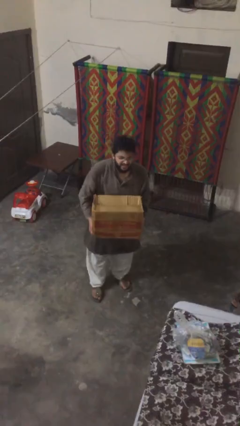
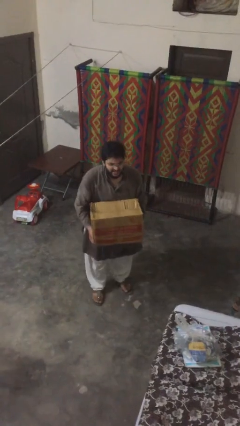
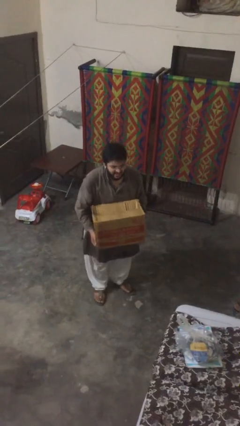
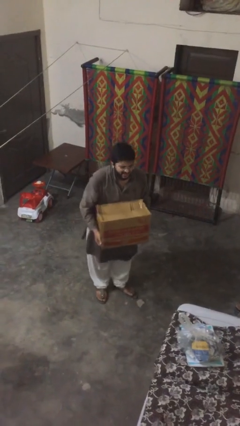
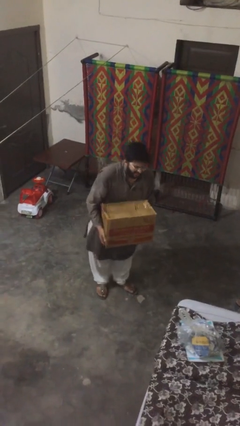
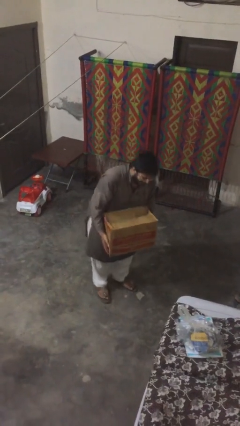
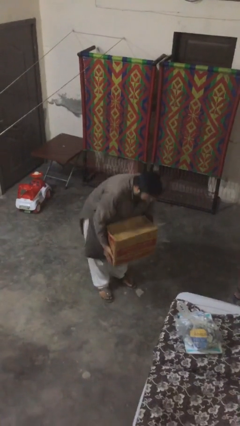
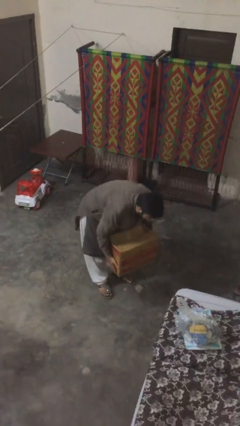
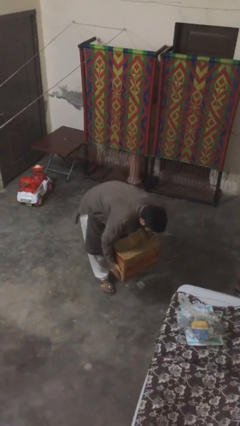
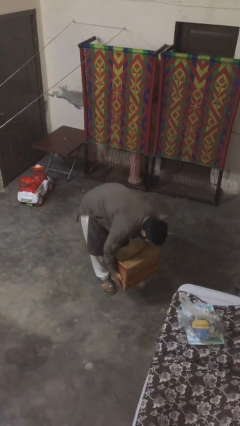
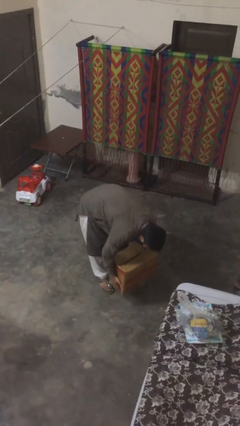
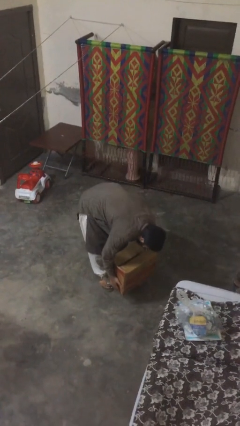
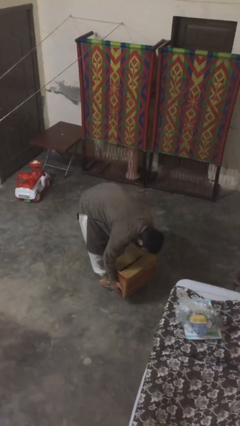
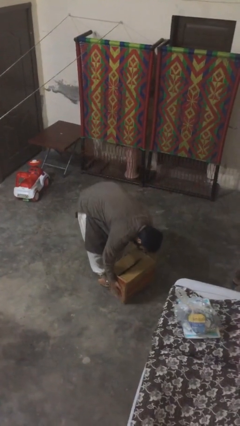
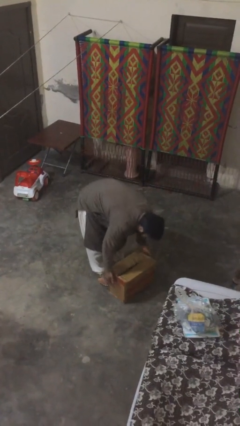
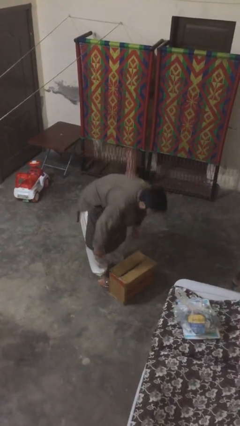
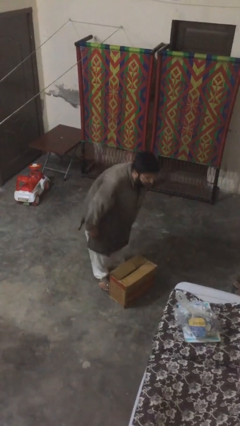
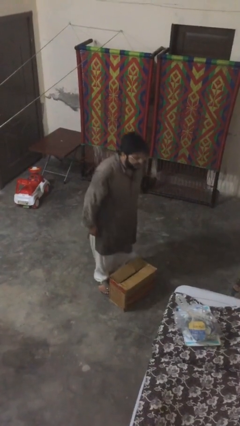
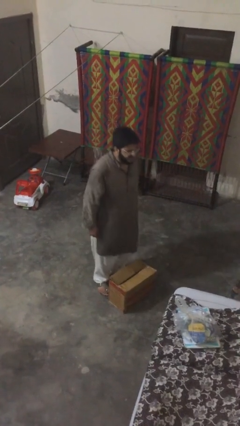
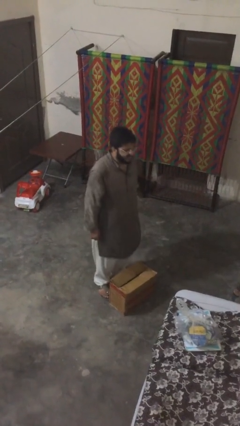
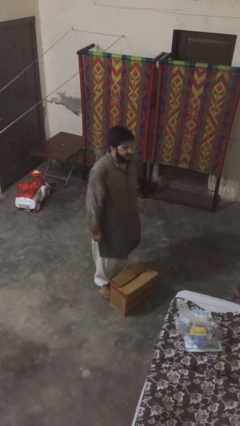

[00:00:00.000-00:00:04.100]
person puts down object on floor

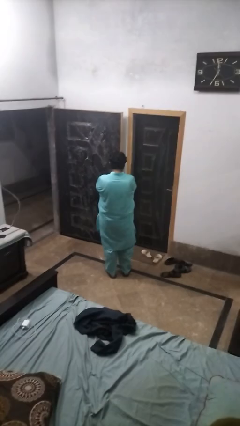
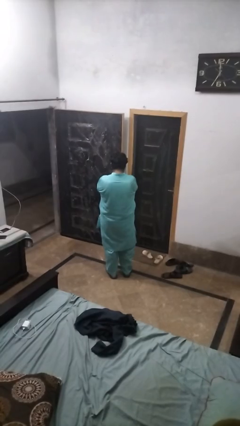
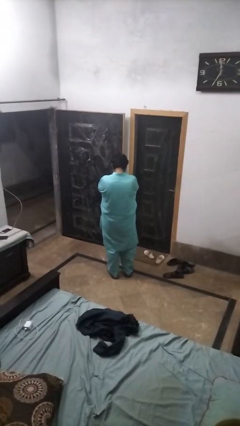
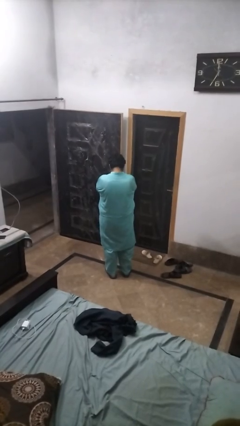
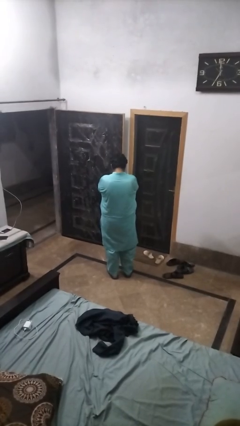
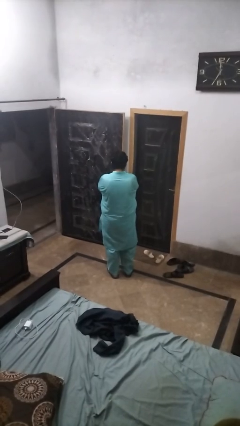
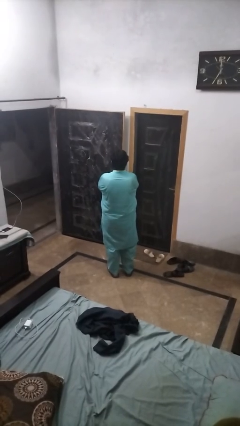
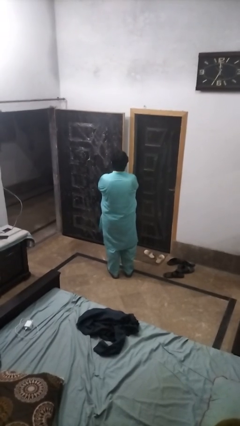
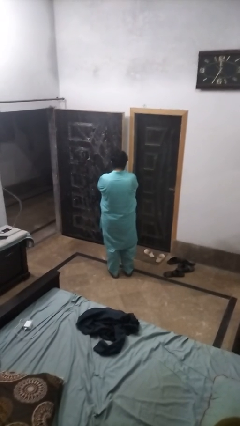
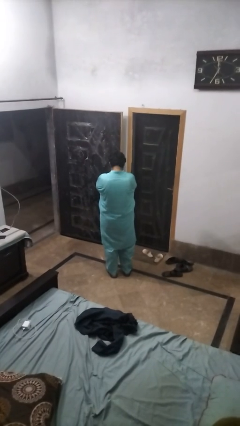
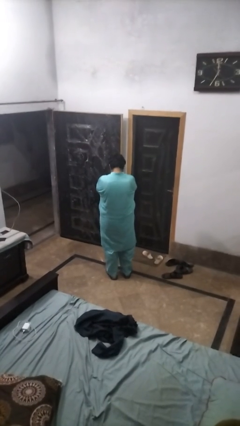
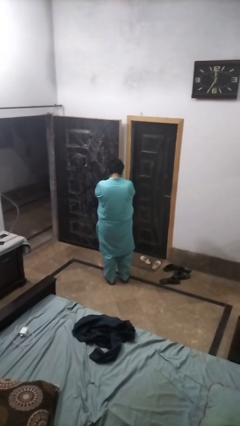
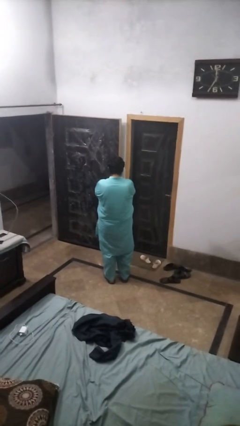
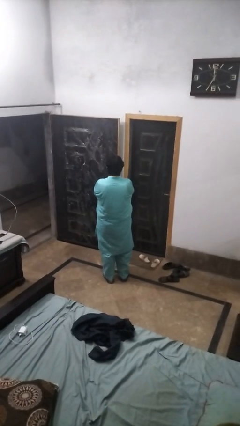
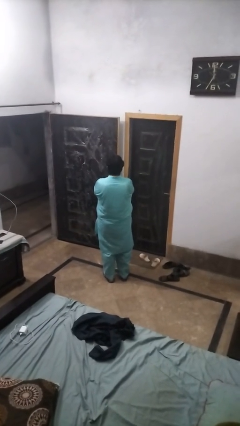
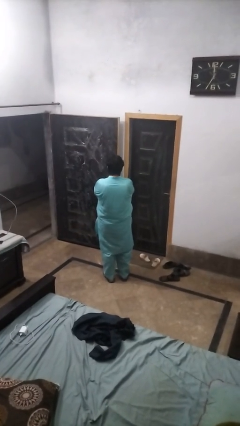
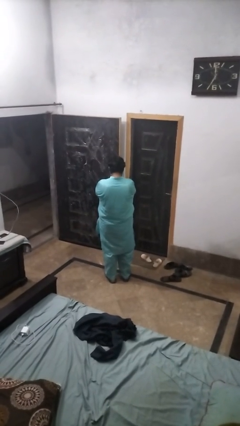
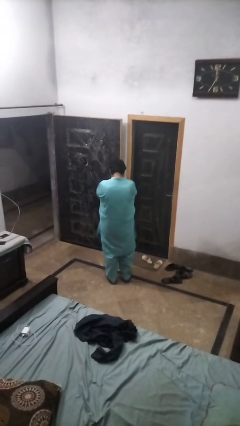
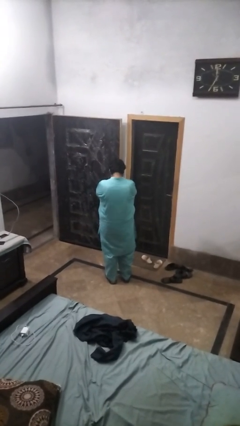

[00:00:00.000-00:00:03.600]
person nods head

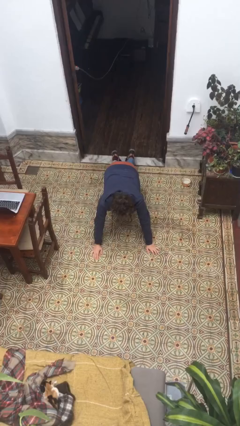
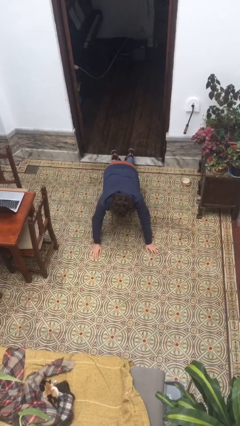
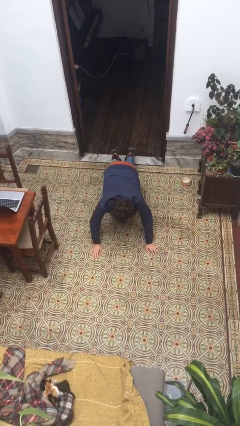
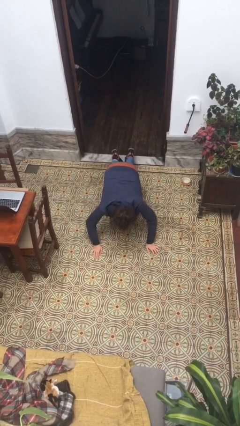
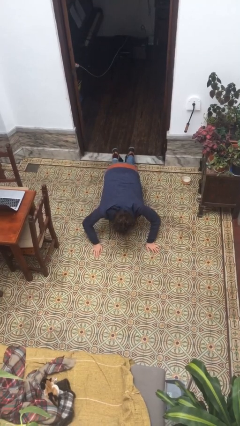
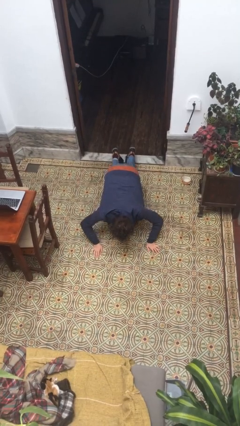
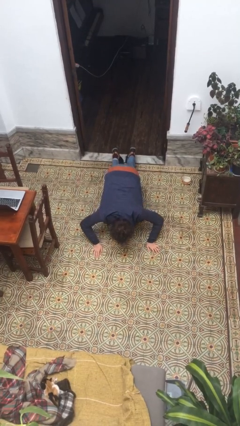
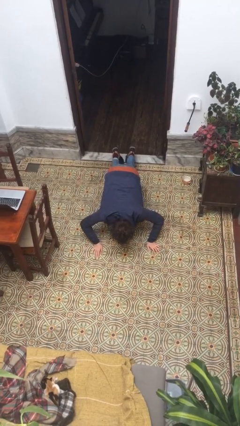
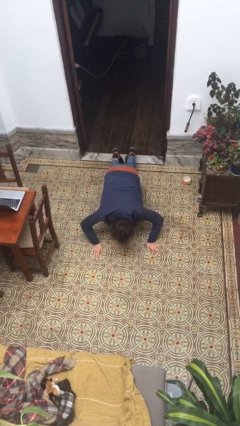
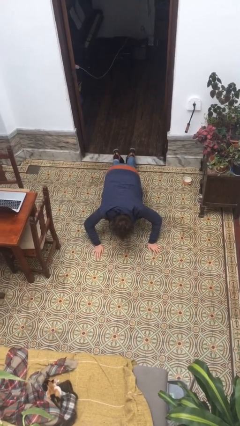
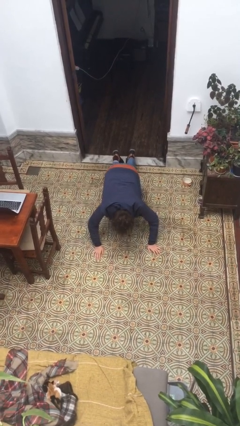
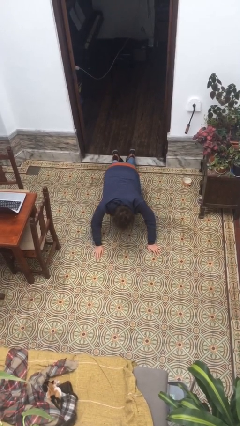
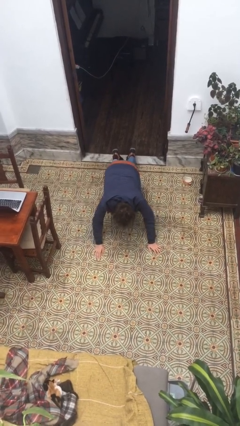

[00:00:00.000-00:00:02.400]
person exercises with pushup

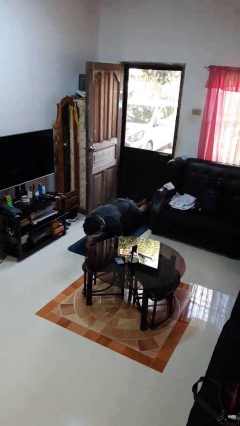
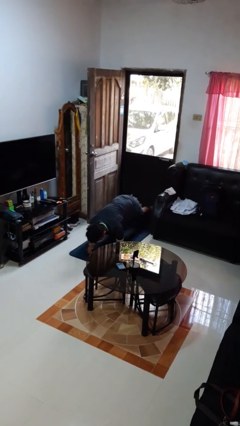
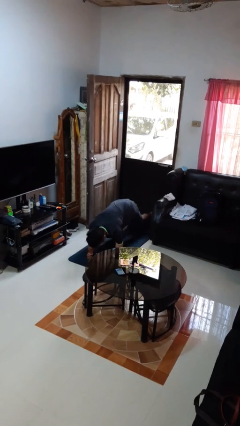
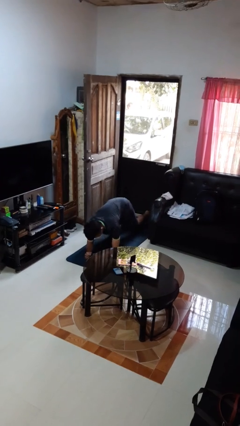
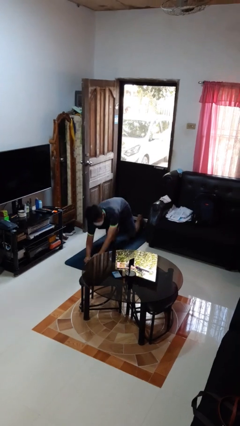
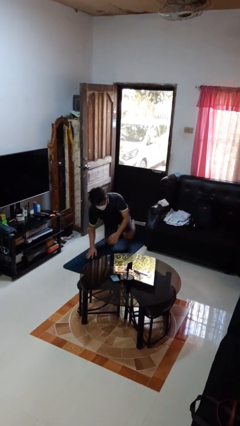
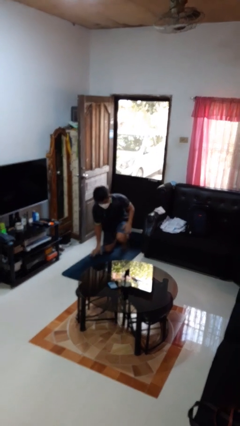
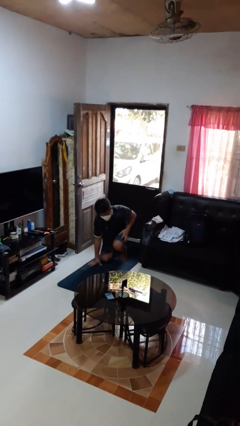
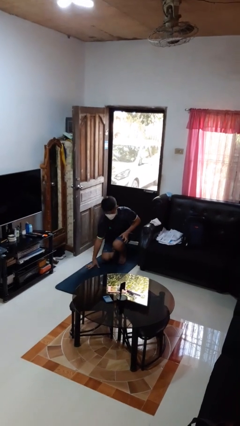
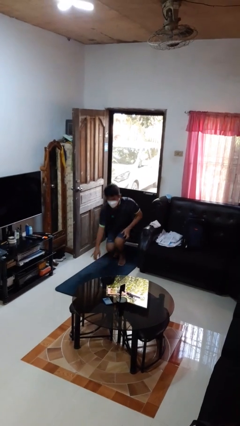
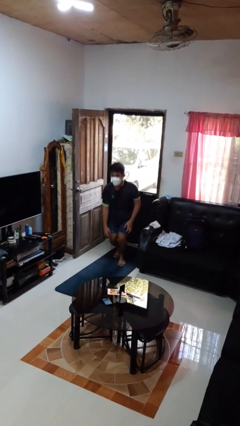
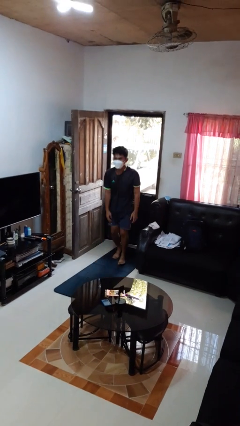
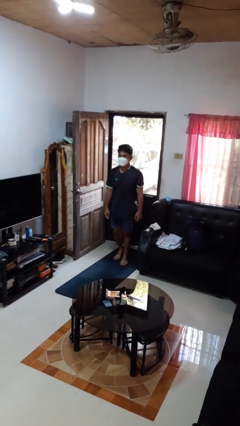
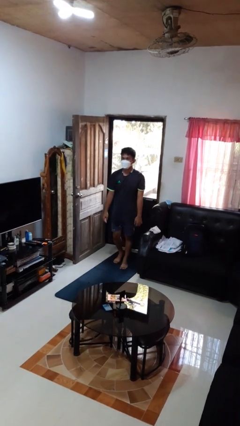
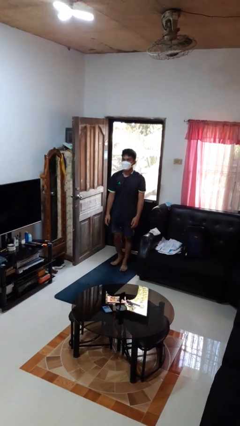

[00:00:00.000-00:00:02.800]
person stands up from floor

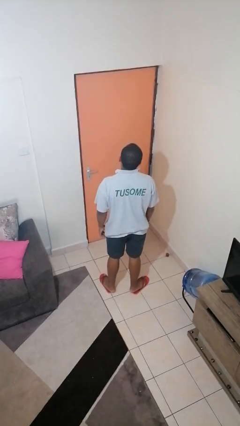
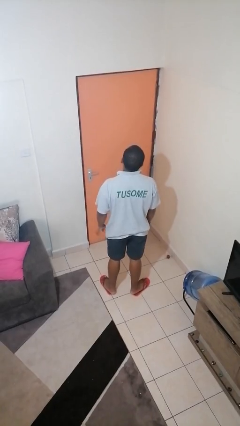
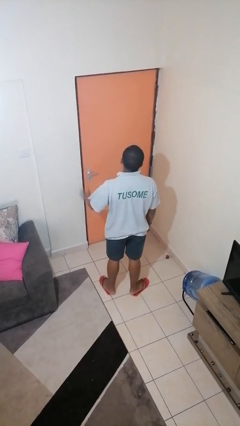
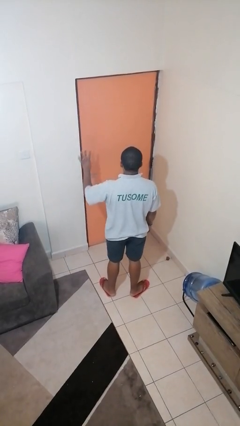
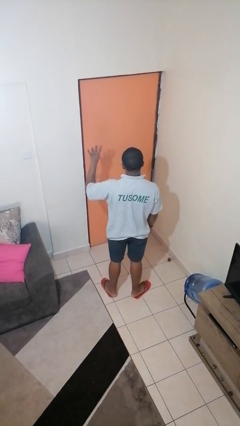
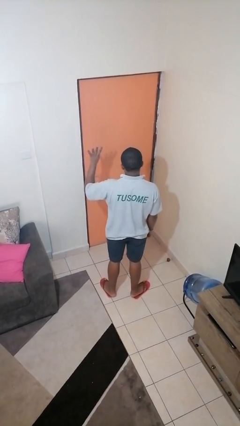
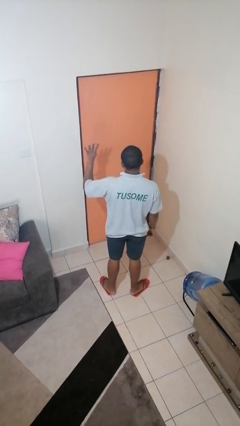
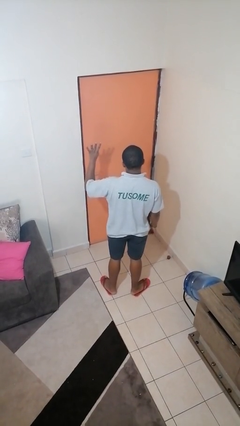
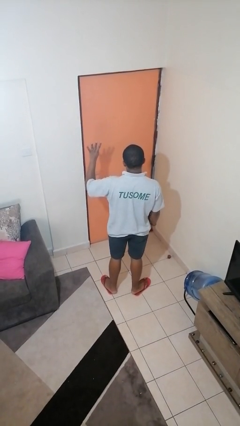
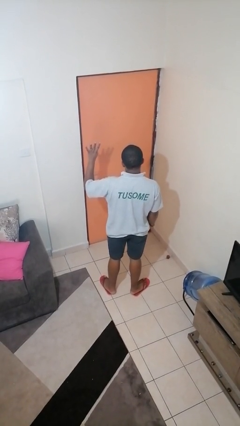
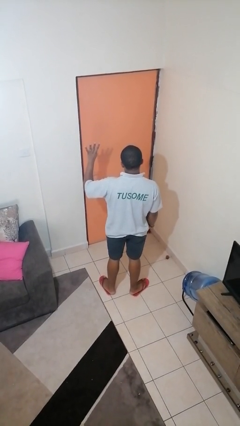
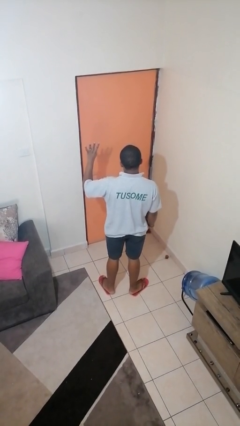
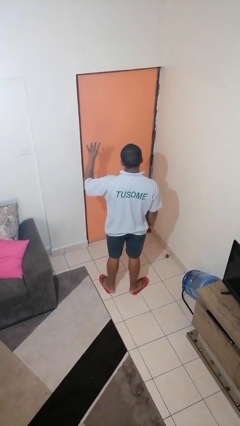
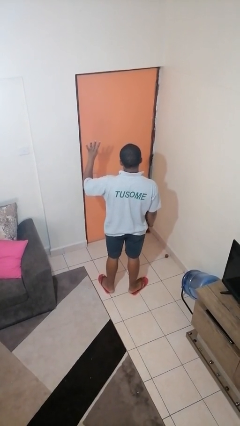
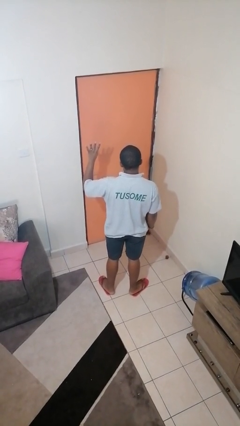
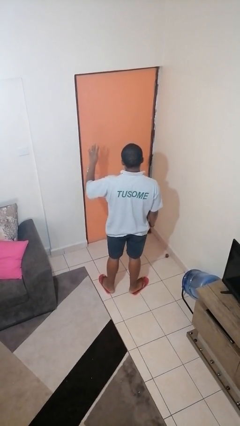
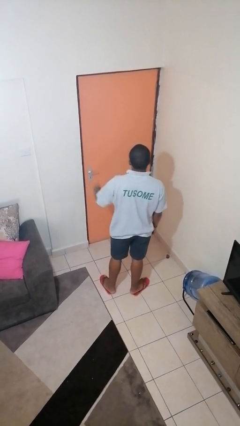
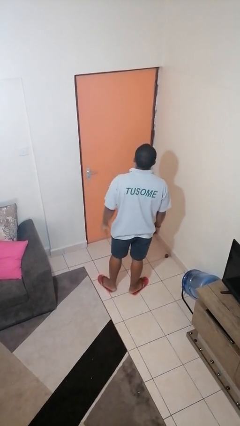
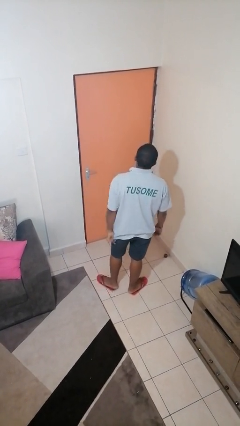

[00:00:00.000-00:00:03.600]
person gestures number four

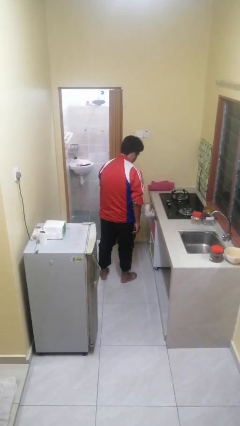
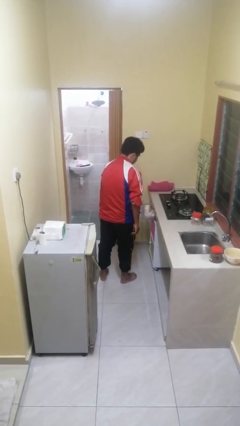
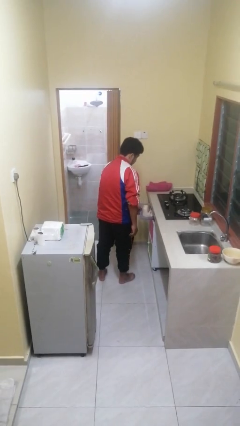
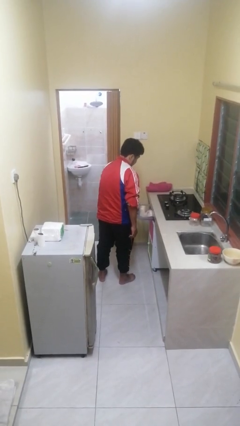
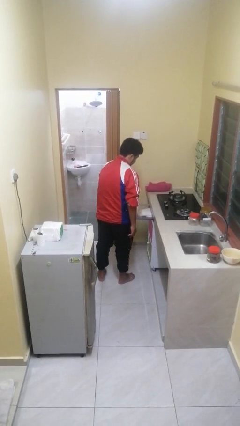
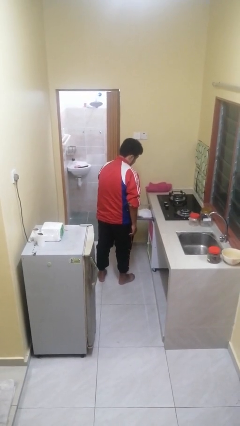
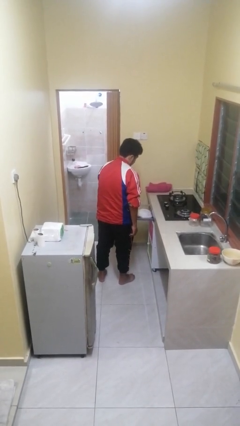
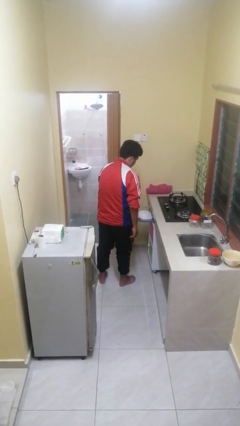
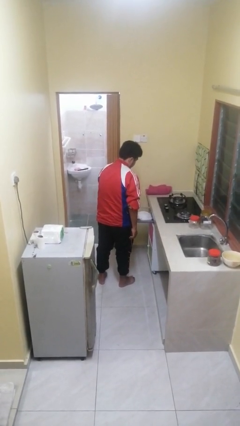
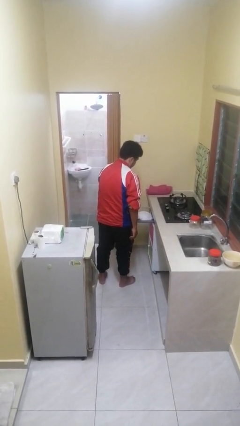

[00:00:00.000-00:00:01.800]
person opens kitchen drawer
